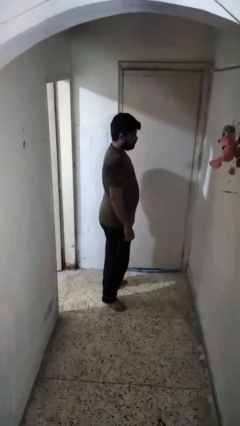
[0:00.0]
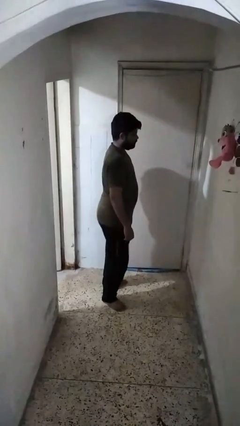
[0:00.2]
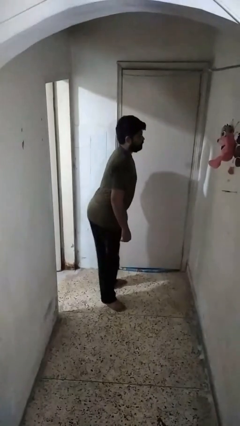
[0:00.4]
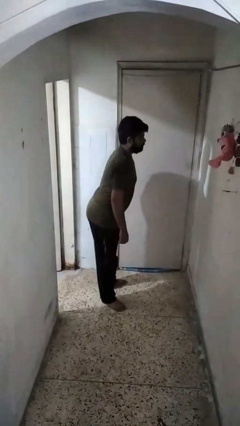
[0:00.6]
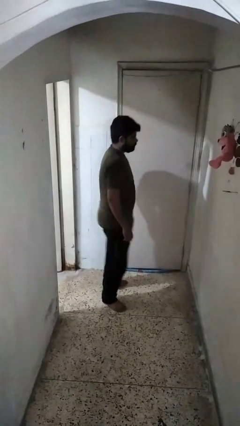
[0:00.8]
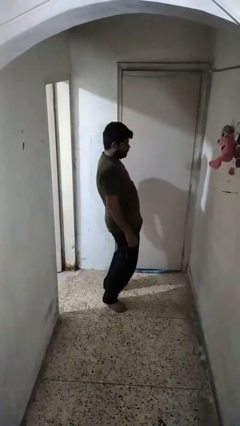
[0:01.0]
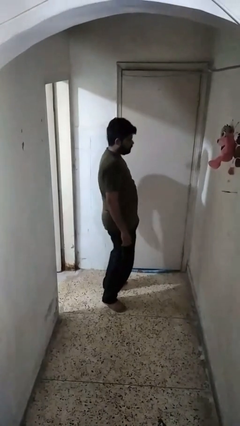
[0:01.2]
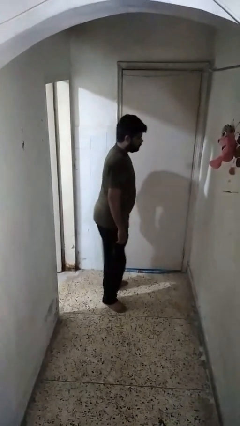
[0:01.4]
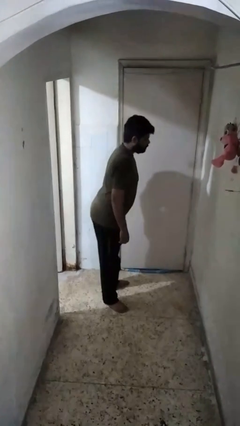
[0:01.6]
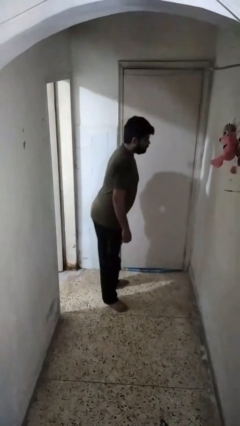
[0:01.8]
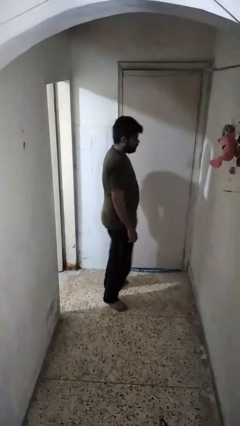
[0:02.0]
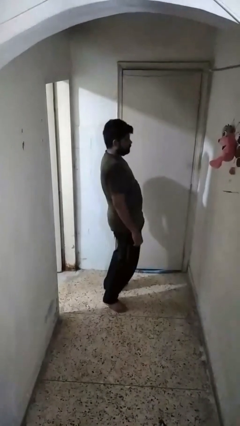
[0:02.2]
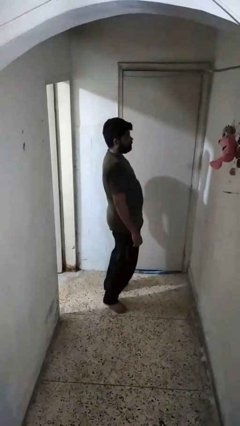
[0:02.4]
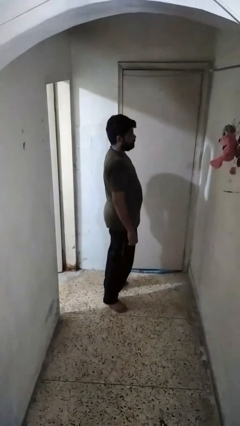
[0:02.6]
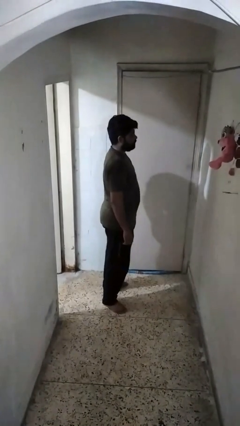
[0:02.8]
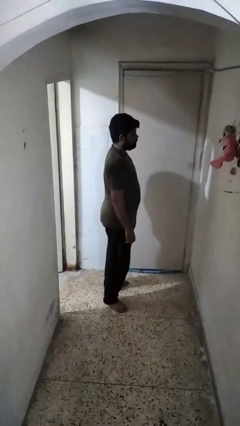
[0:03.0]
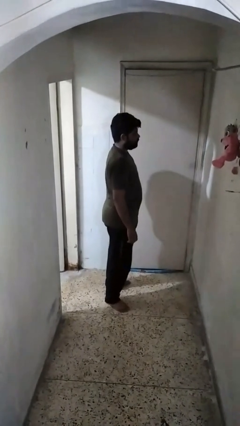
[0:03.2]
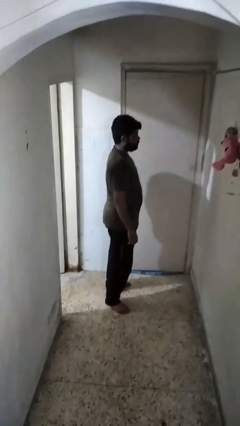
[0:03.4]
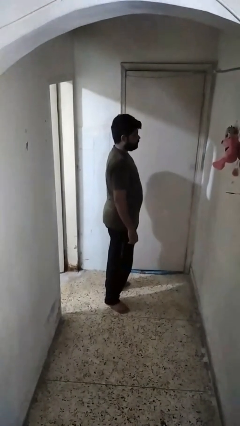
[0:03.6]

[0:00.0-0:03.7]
person wiggles hips

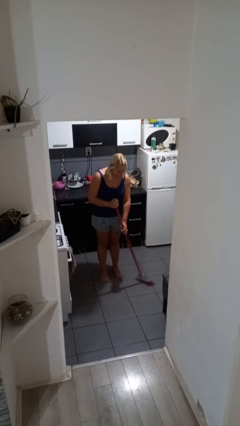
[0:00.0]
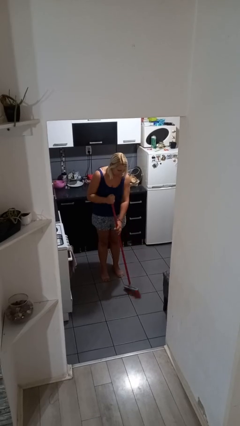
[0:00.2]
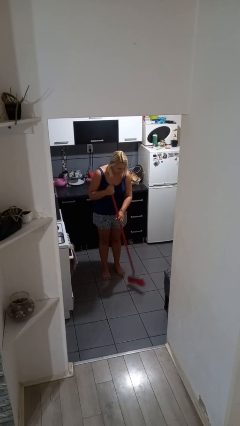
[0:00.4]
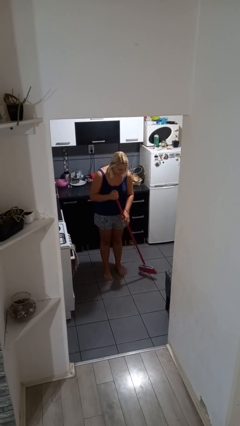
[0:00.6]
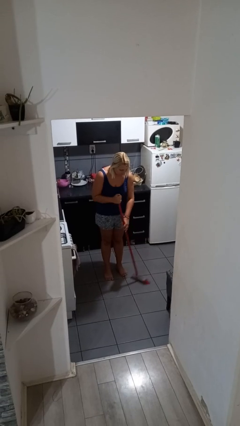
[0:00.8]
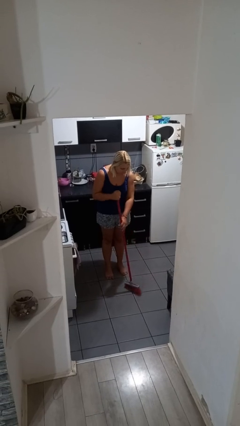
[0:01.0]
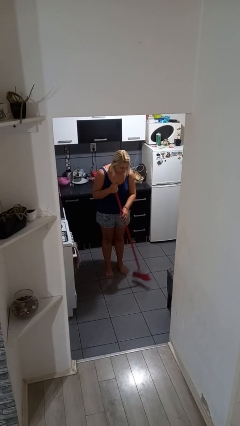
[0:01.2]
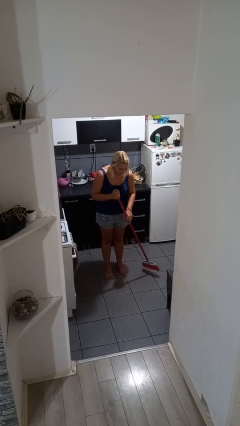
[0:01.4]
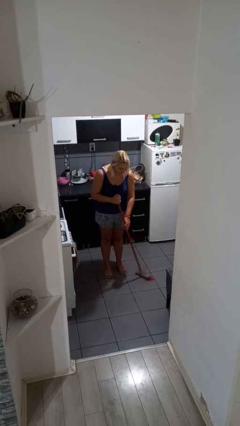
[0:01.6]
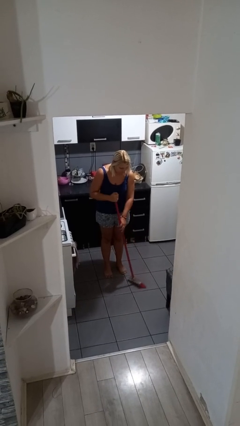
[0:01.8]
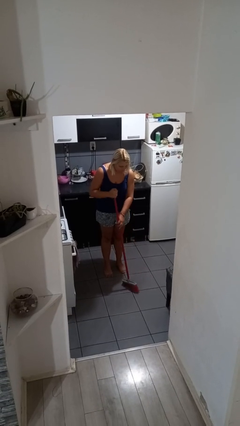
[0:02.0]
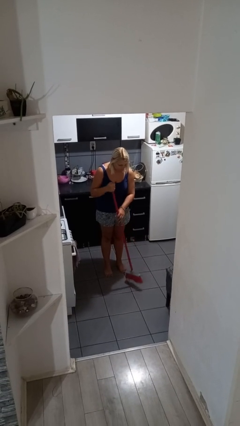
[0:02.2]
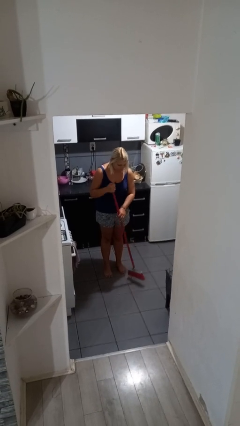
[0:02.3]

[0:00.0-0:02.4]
person sweeps floor

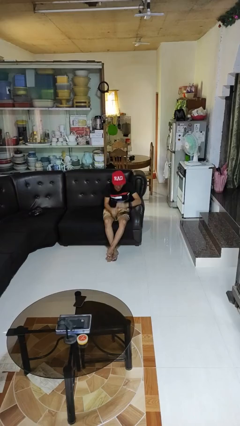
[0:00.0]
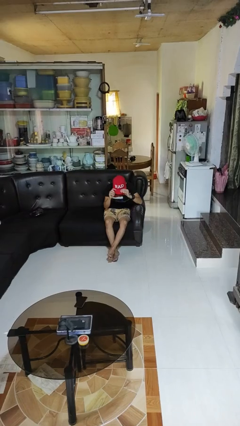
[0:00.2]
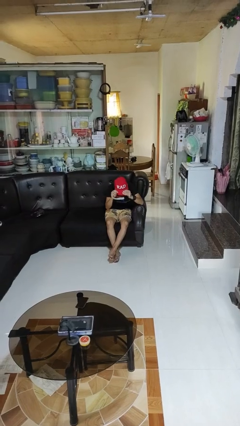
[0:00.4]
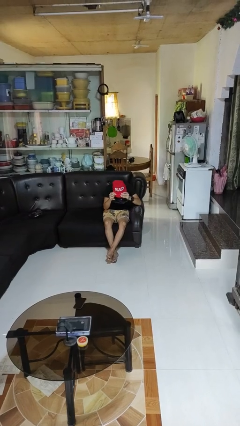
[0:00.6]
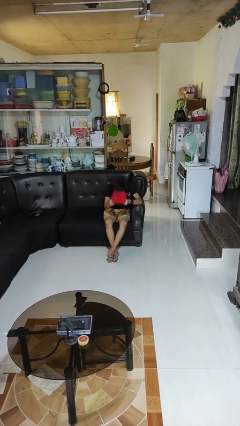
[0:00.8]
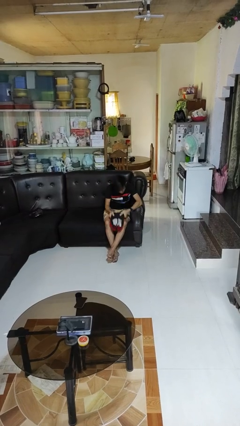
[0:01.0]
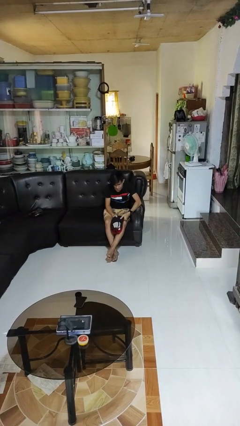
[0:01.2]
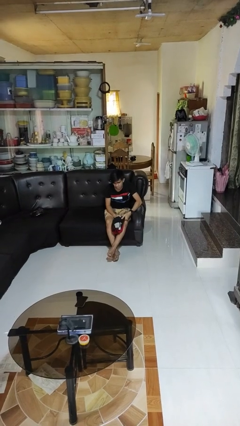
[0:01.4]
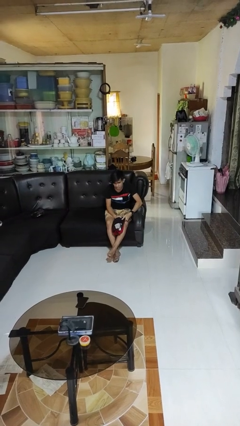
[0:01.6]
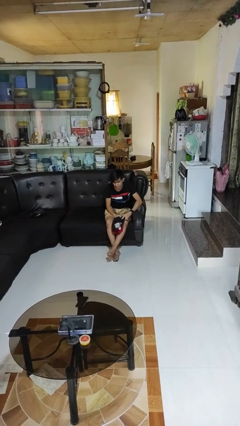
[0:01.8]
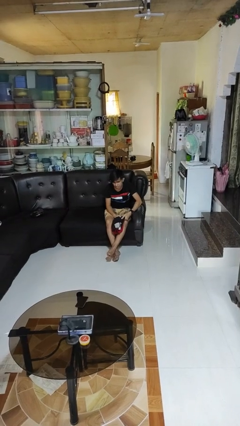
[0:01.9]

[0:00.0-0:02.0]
person takes off hat

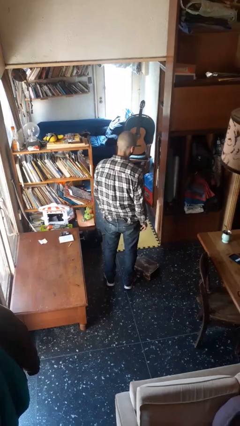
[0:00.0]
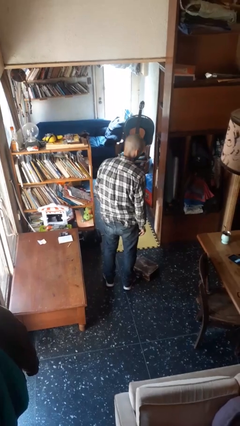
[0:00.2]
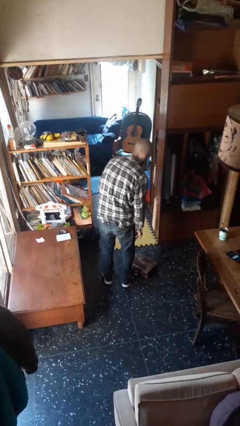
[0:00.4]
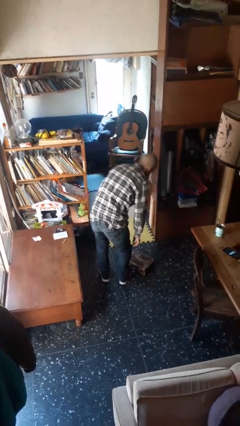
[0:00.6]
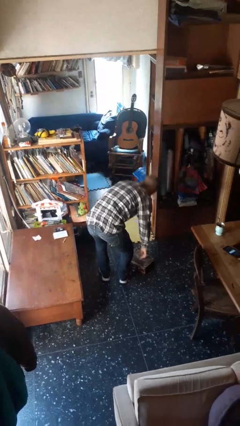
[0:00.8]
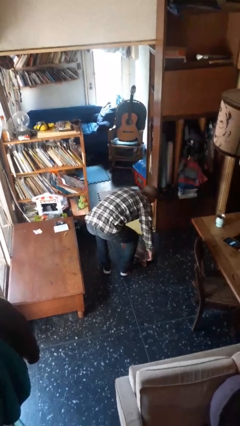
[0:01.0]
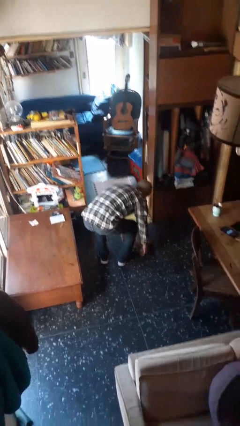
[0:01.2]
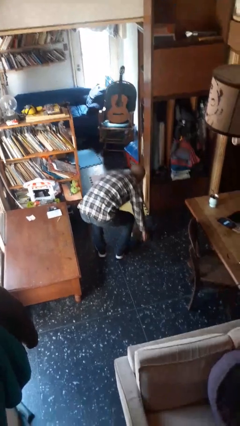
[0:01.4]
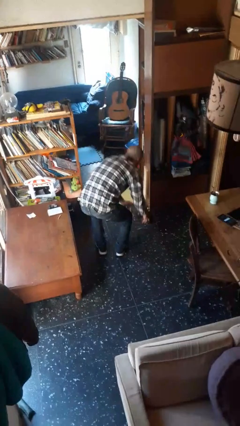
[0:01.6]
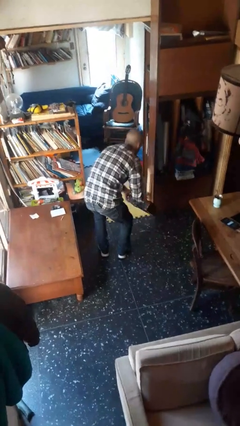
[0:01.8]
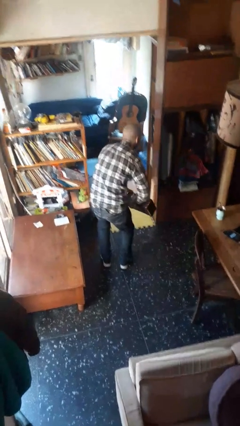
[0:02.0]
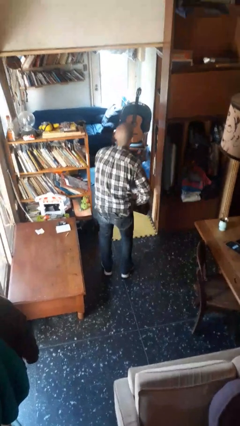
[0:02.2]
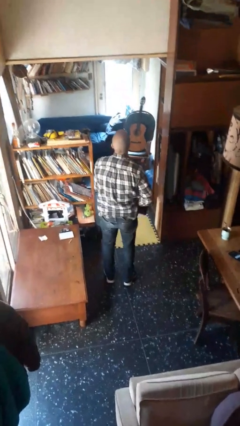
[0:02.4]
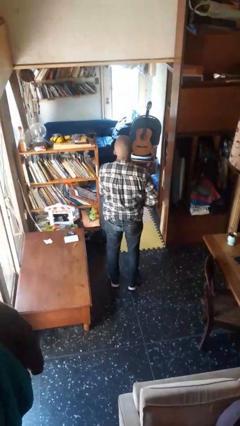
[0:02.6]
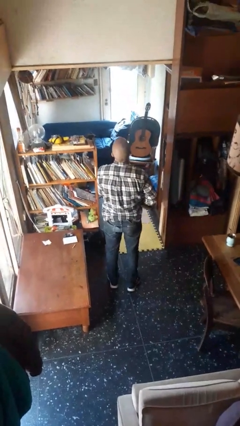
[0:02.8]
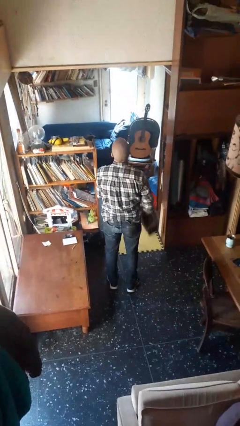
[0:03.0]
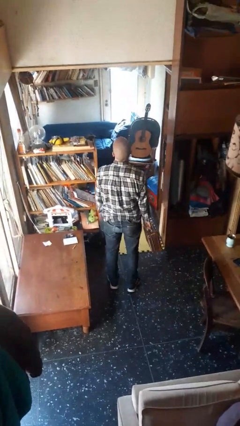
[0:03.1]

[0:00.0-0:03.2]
person picks up object from floor

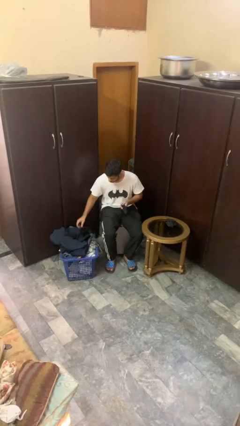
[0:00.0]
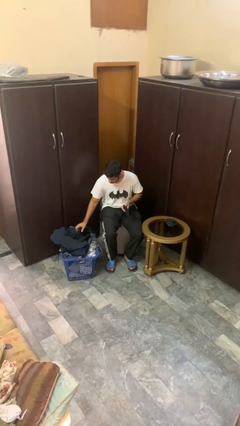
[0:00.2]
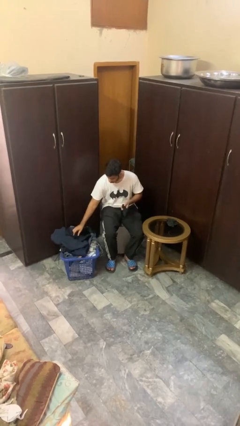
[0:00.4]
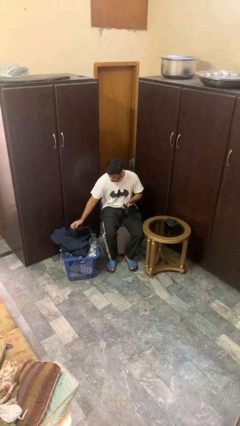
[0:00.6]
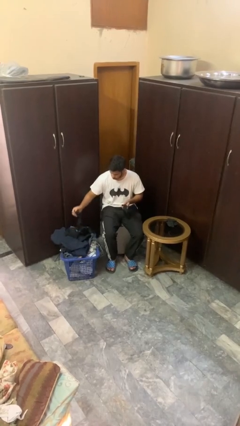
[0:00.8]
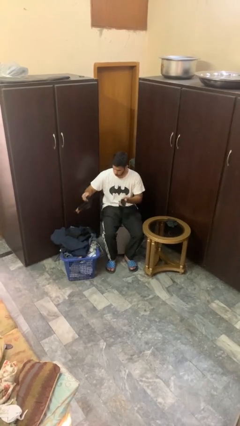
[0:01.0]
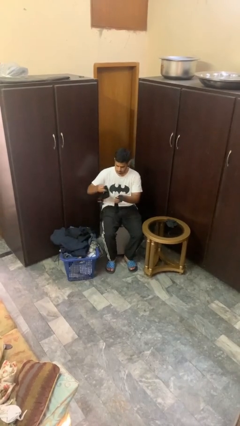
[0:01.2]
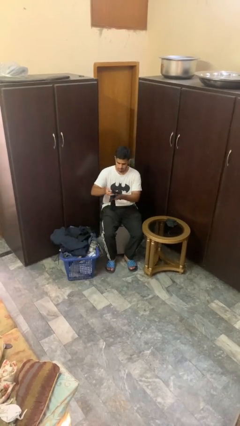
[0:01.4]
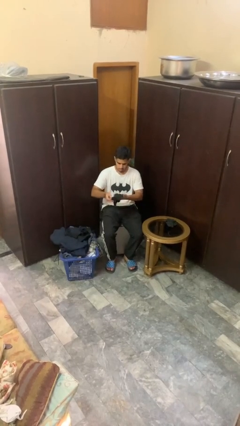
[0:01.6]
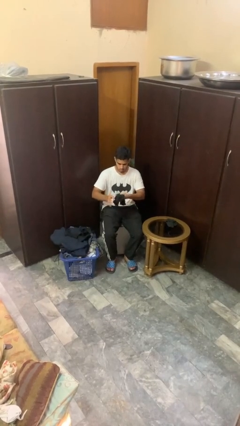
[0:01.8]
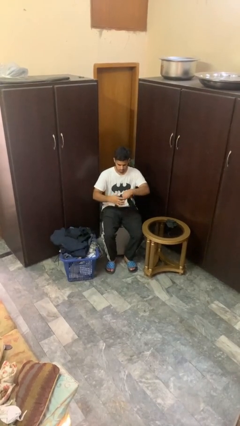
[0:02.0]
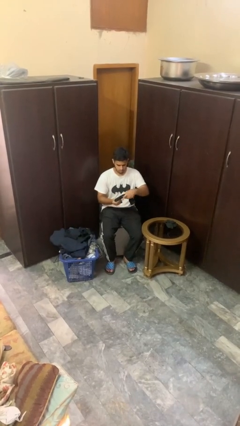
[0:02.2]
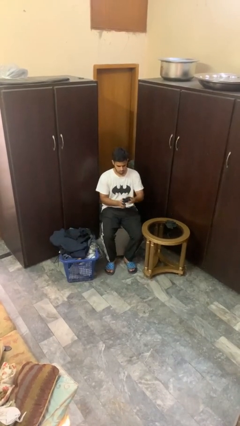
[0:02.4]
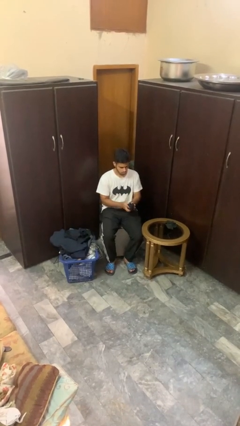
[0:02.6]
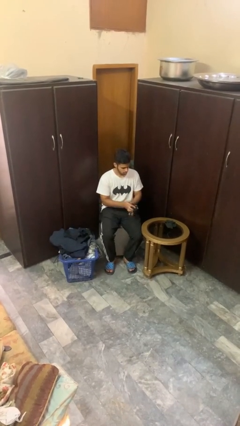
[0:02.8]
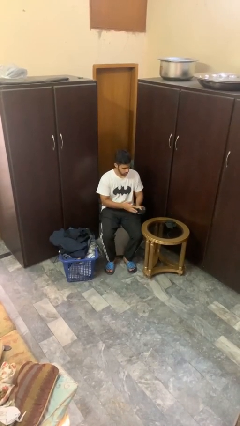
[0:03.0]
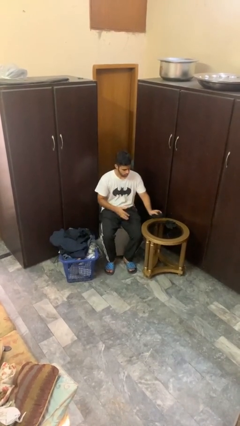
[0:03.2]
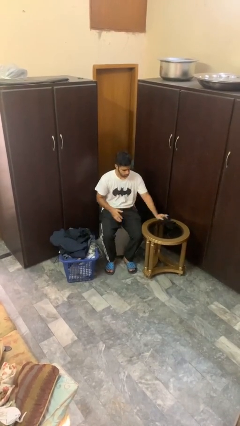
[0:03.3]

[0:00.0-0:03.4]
person folds socks

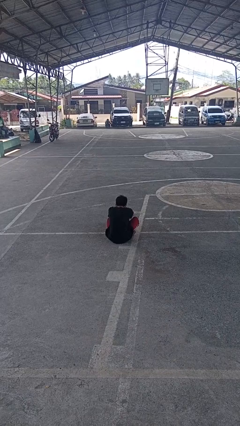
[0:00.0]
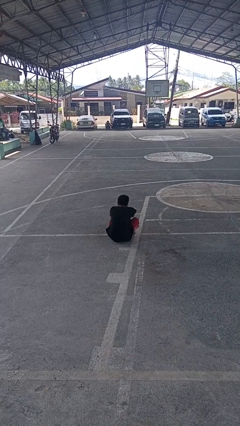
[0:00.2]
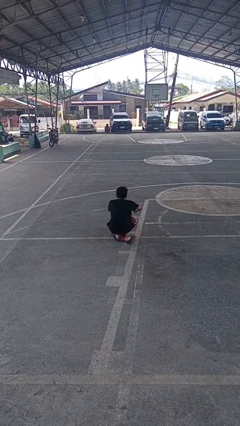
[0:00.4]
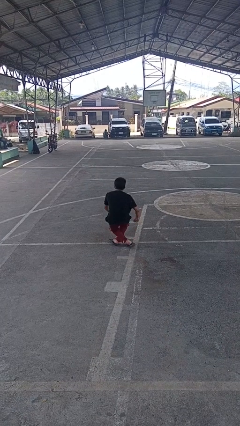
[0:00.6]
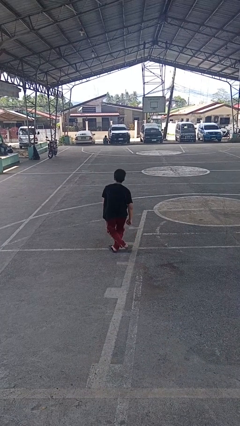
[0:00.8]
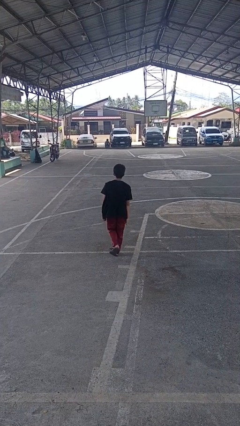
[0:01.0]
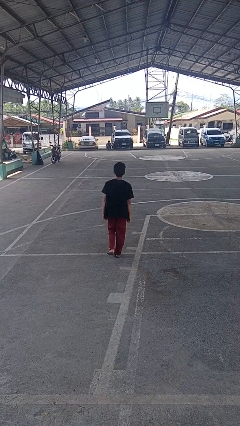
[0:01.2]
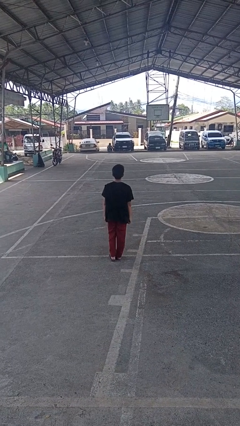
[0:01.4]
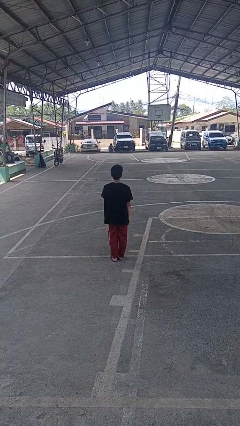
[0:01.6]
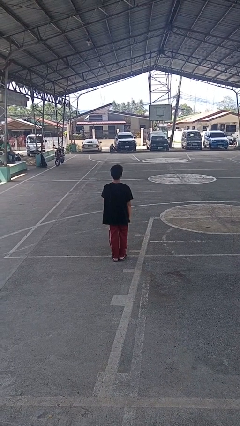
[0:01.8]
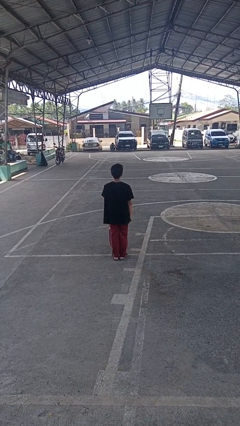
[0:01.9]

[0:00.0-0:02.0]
person stands up from floor

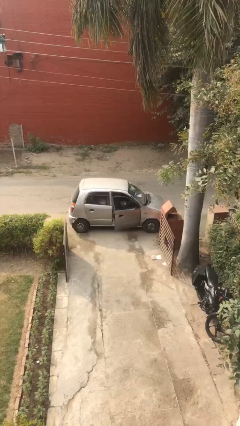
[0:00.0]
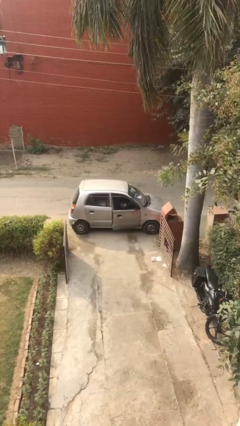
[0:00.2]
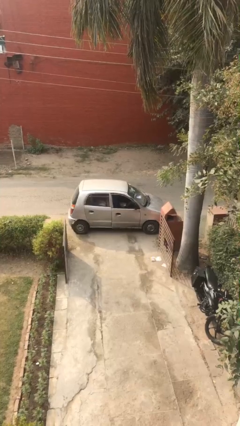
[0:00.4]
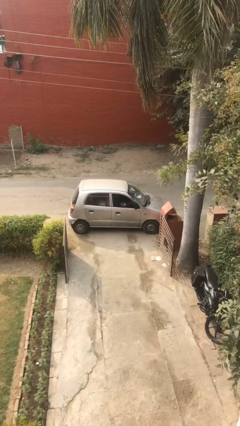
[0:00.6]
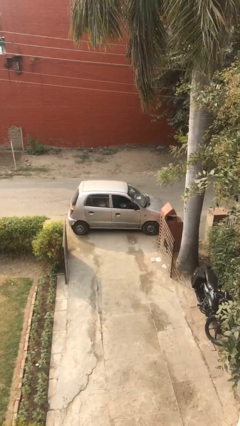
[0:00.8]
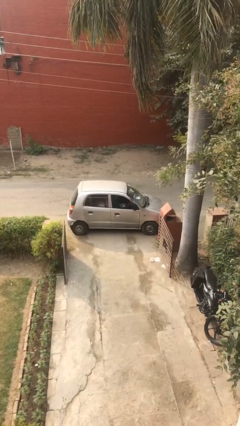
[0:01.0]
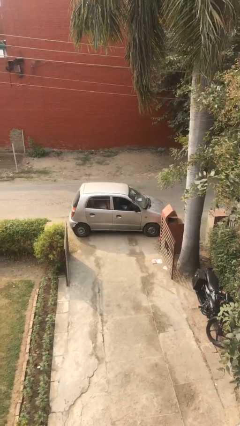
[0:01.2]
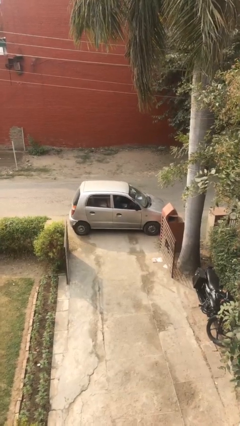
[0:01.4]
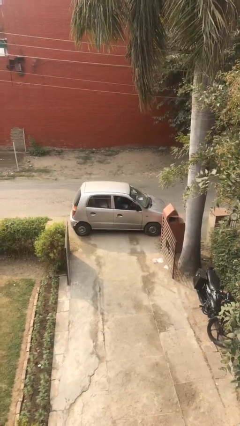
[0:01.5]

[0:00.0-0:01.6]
person closes car door
